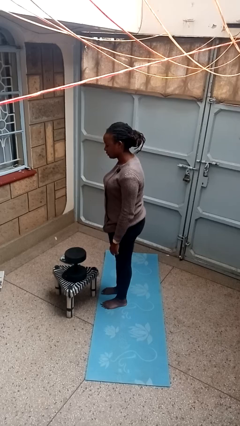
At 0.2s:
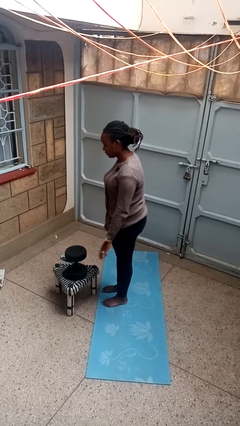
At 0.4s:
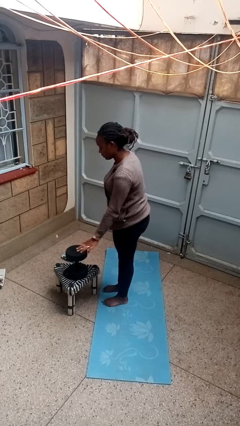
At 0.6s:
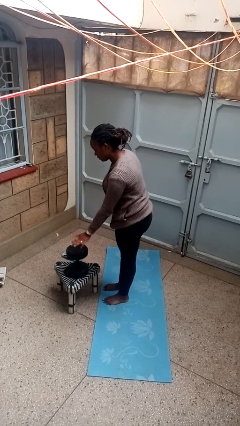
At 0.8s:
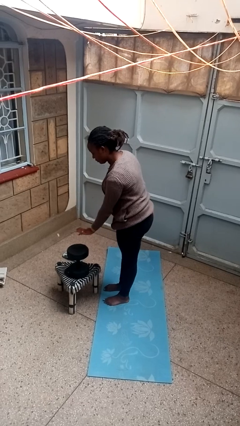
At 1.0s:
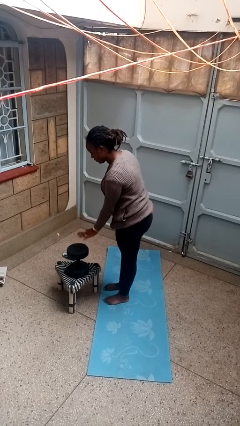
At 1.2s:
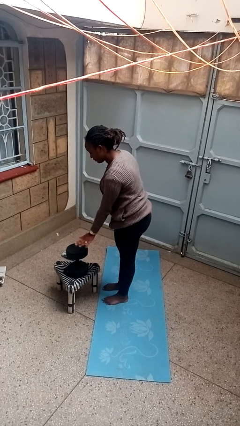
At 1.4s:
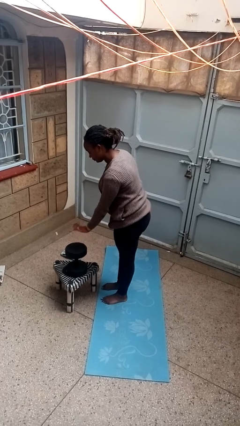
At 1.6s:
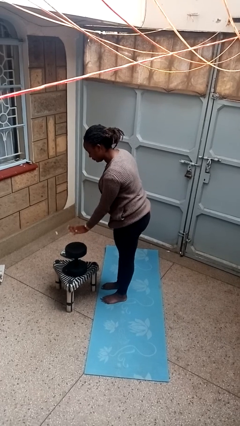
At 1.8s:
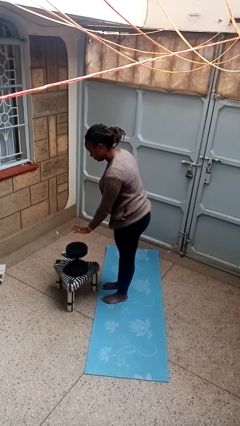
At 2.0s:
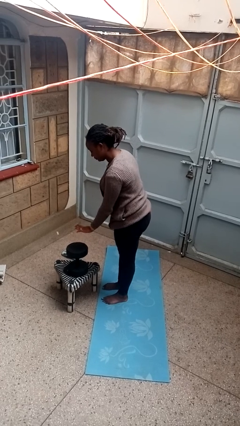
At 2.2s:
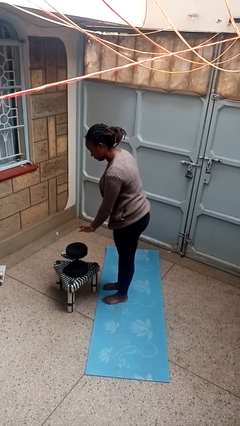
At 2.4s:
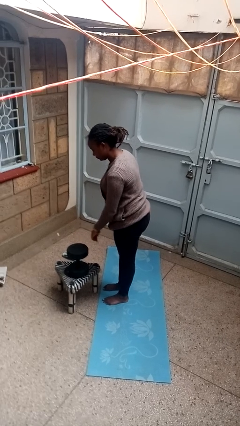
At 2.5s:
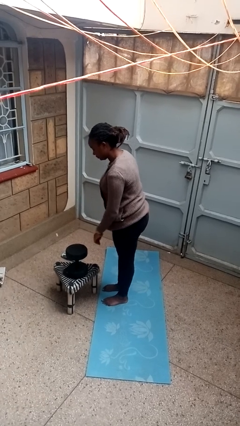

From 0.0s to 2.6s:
person waves hand over object

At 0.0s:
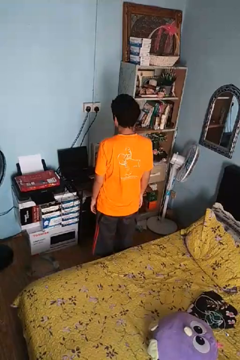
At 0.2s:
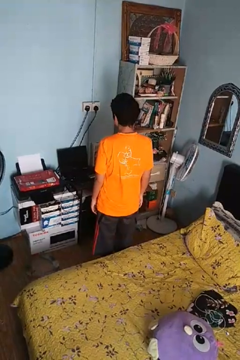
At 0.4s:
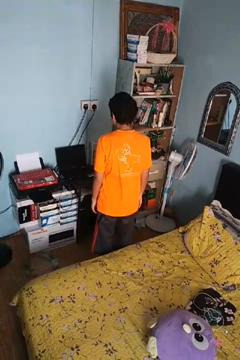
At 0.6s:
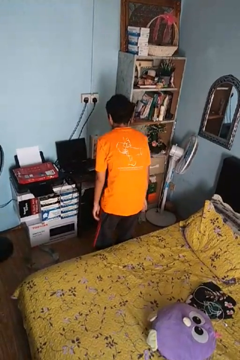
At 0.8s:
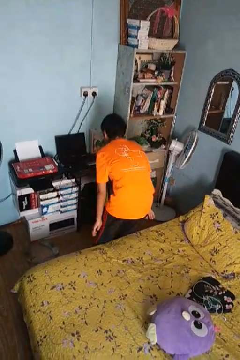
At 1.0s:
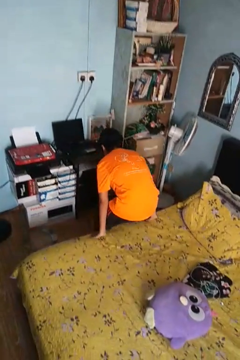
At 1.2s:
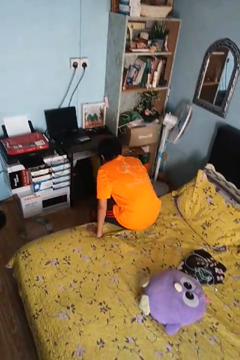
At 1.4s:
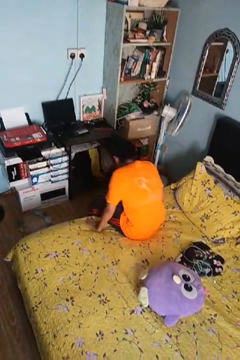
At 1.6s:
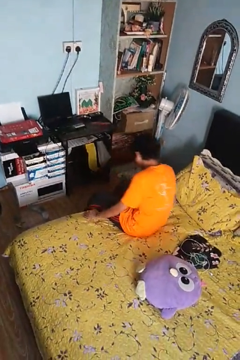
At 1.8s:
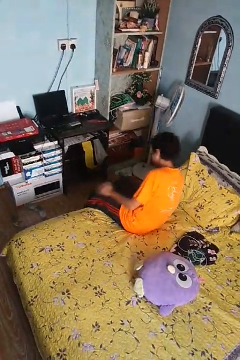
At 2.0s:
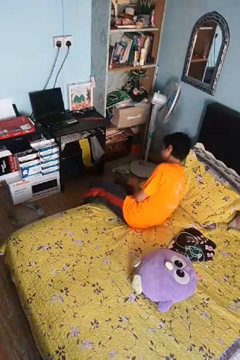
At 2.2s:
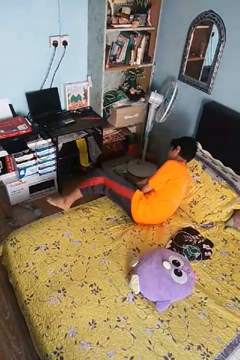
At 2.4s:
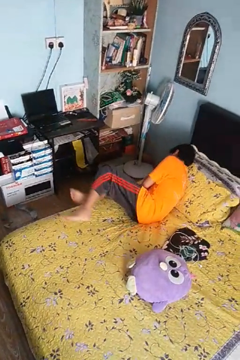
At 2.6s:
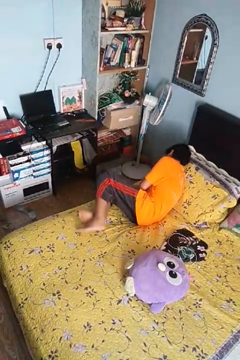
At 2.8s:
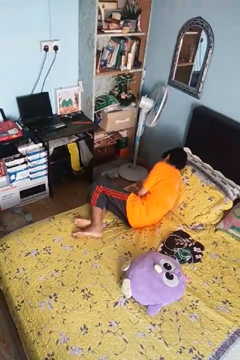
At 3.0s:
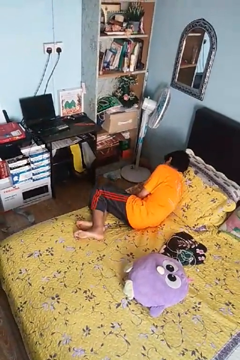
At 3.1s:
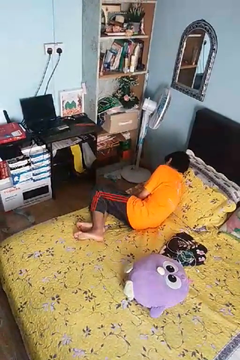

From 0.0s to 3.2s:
person lies down on bed

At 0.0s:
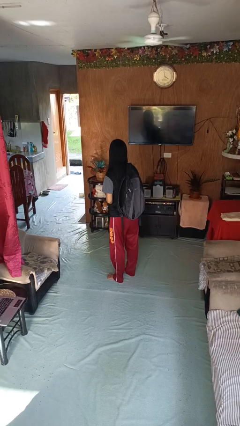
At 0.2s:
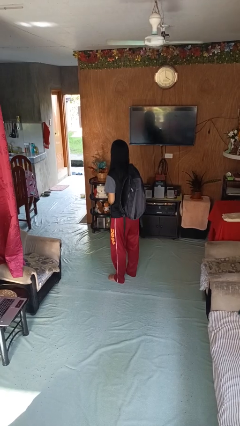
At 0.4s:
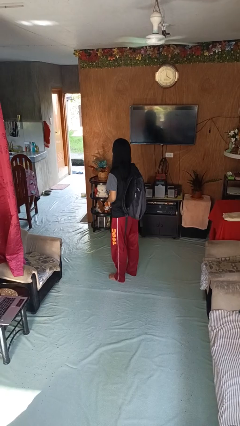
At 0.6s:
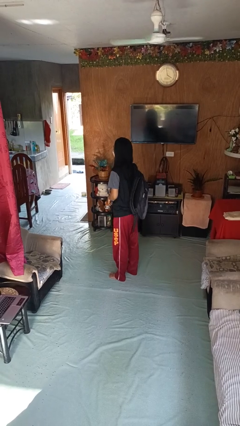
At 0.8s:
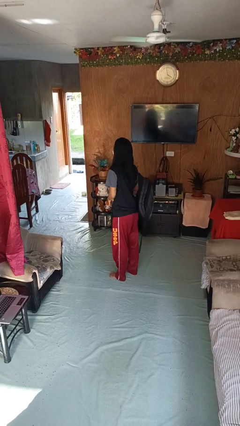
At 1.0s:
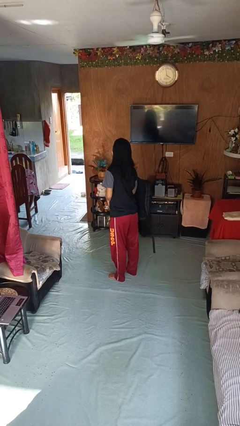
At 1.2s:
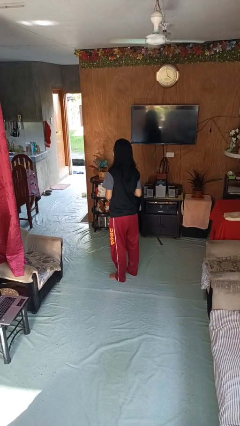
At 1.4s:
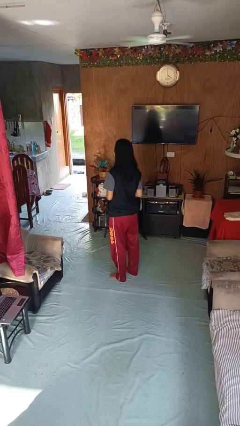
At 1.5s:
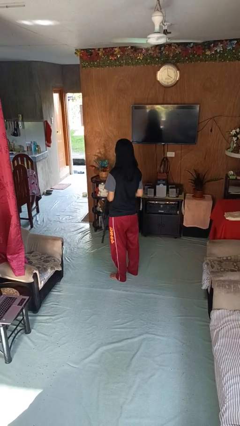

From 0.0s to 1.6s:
person takes off backpack

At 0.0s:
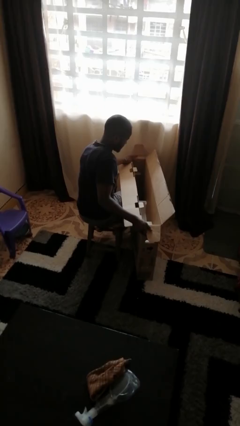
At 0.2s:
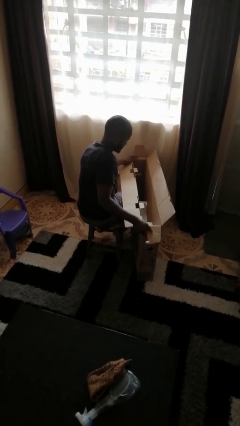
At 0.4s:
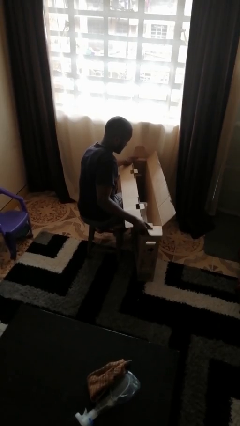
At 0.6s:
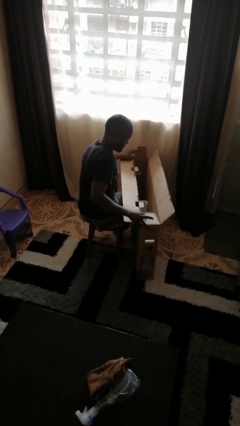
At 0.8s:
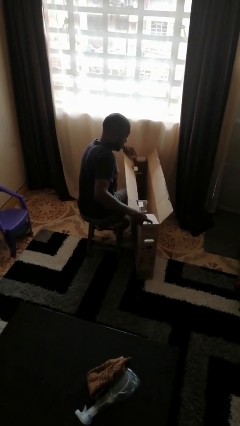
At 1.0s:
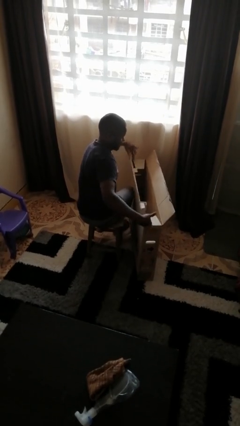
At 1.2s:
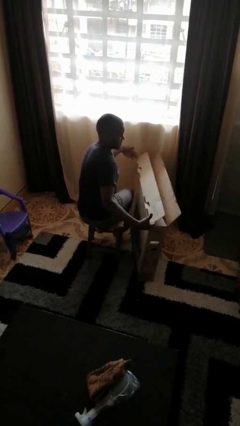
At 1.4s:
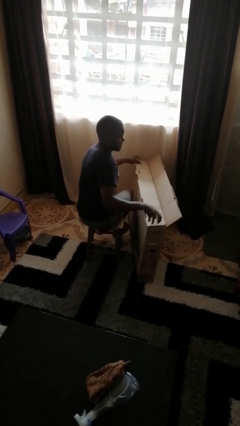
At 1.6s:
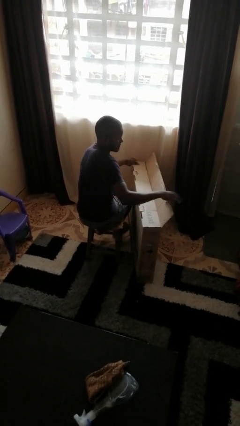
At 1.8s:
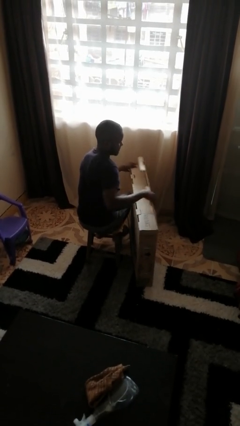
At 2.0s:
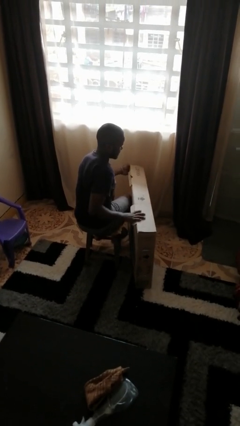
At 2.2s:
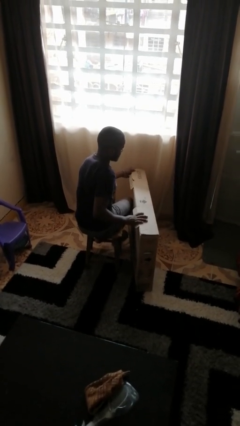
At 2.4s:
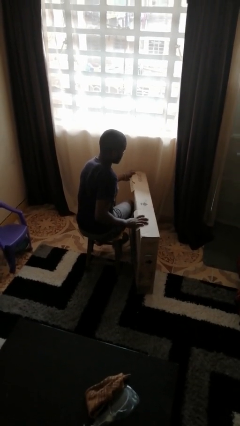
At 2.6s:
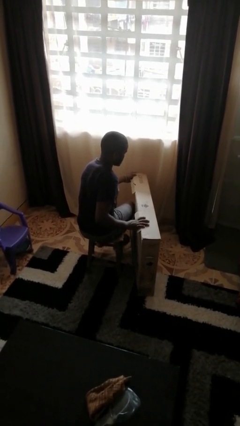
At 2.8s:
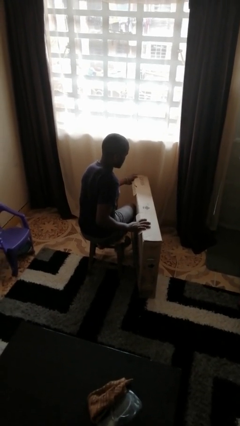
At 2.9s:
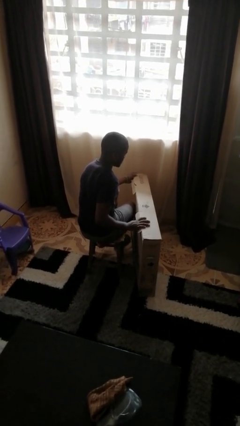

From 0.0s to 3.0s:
person closes box

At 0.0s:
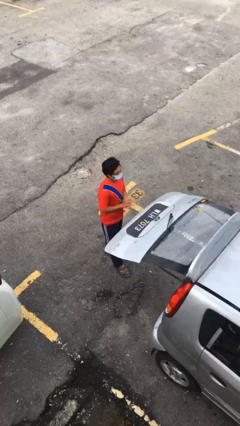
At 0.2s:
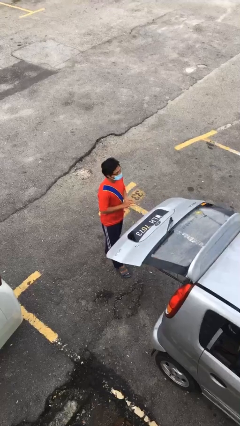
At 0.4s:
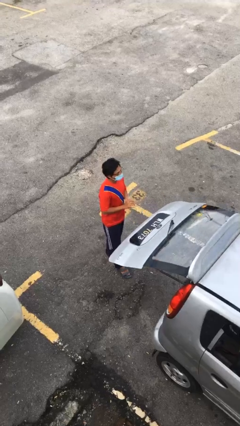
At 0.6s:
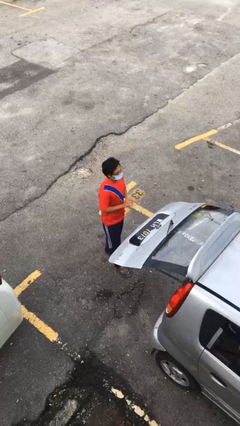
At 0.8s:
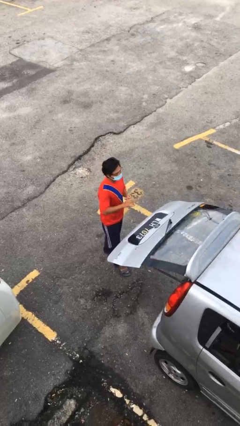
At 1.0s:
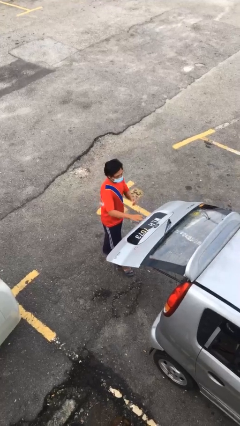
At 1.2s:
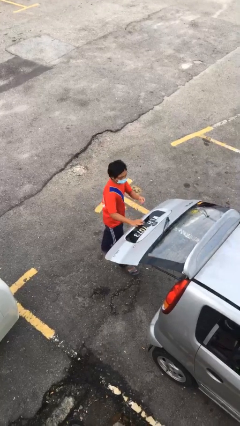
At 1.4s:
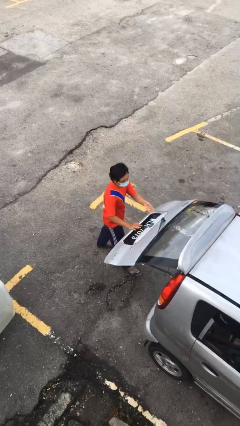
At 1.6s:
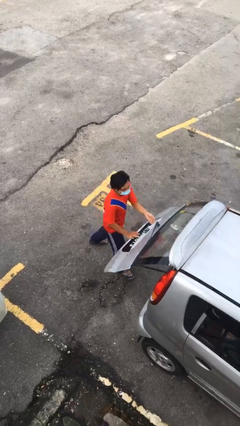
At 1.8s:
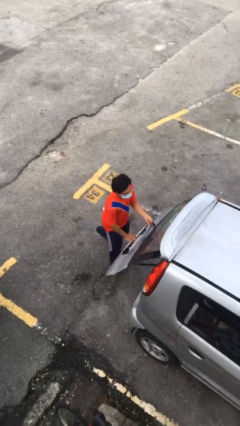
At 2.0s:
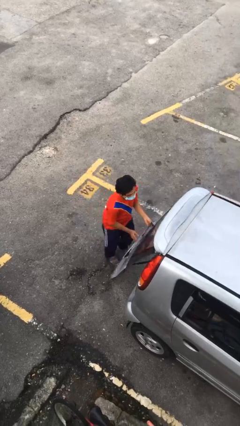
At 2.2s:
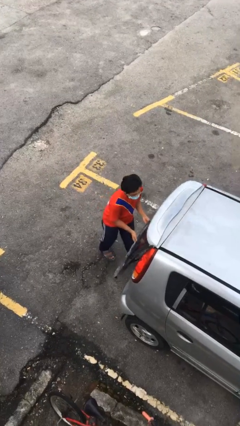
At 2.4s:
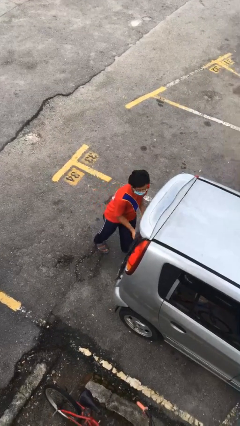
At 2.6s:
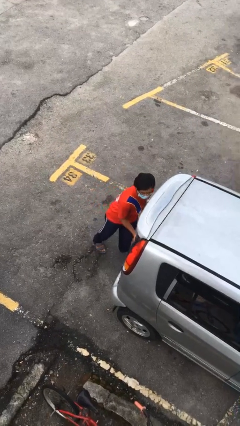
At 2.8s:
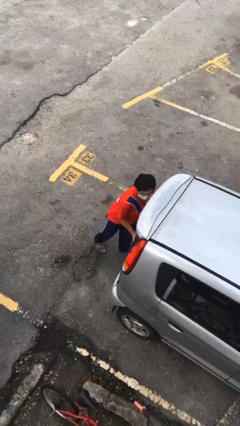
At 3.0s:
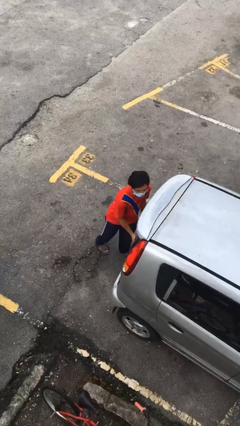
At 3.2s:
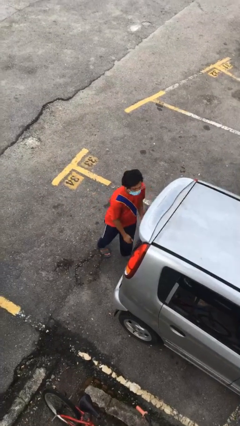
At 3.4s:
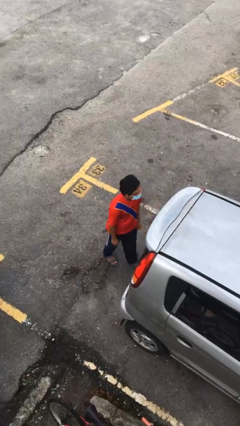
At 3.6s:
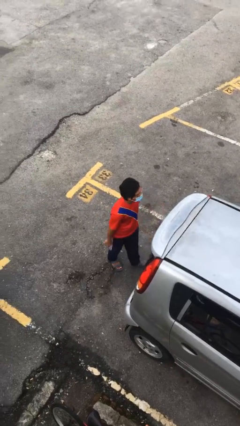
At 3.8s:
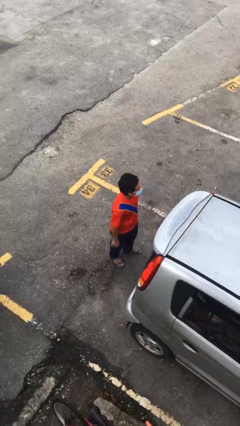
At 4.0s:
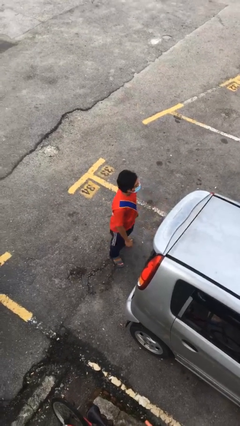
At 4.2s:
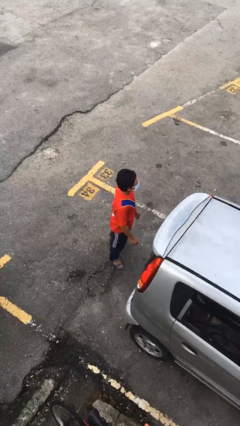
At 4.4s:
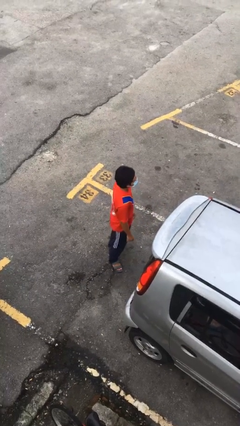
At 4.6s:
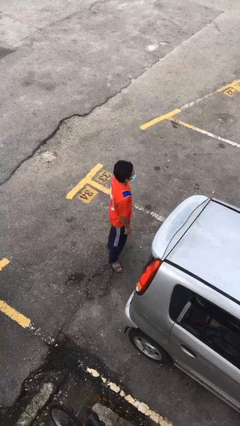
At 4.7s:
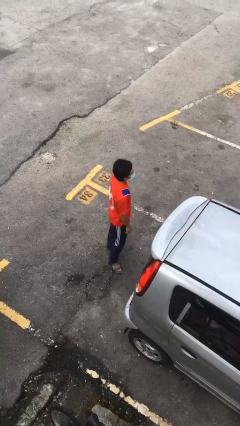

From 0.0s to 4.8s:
person closes car trunk

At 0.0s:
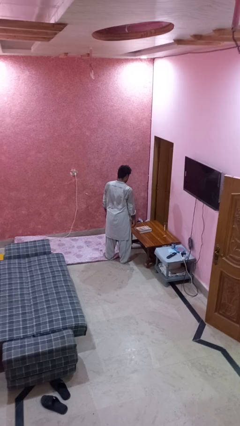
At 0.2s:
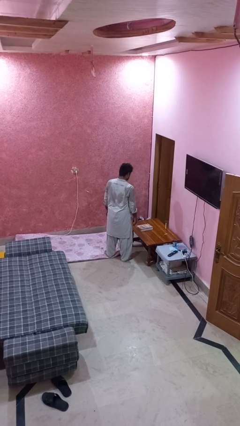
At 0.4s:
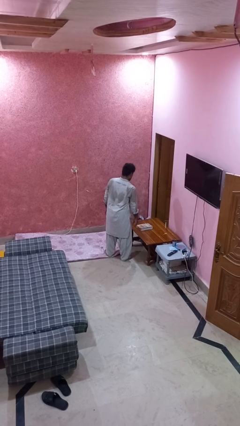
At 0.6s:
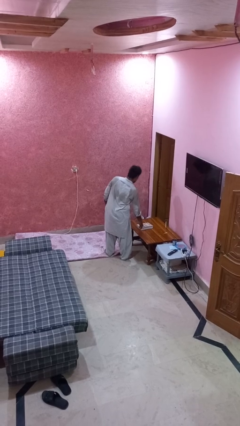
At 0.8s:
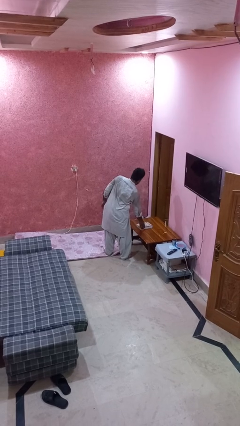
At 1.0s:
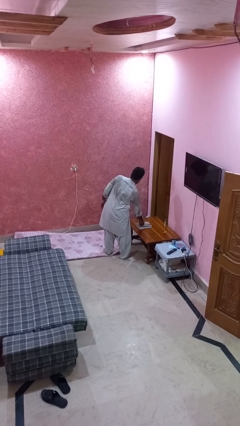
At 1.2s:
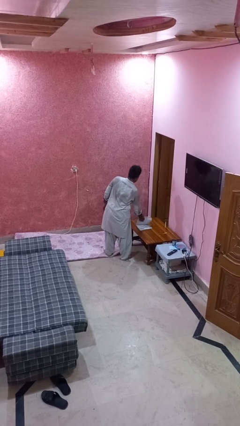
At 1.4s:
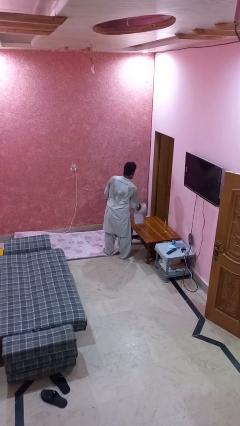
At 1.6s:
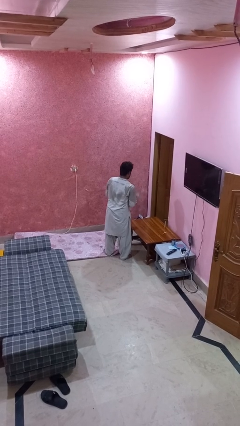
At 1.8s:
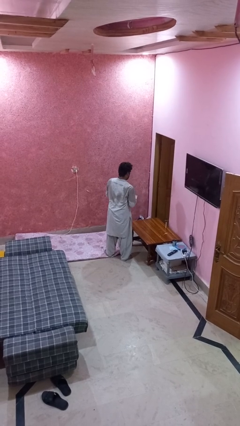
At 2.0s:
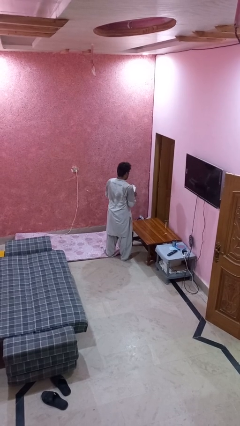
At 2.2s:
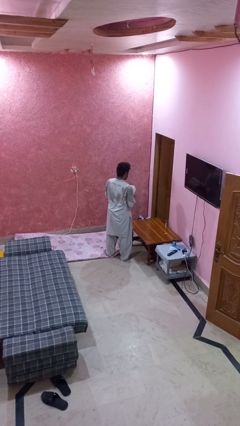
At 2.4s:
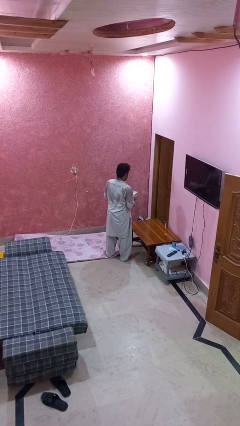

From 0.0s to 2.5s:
person picks up object from table

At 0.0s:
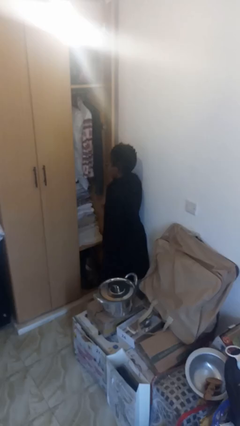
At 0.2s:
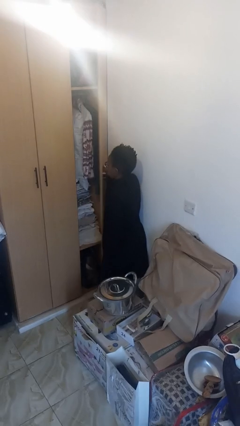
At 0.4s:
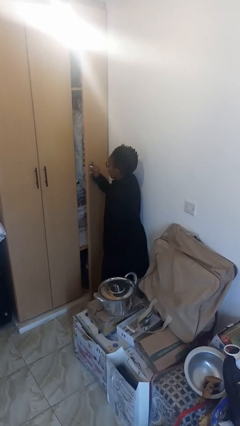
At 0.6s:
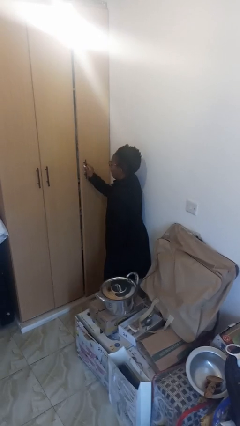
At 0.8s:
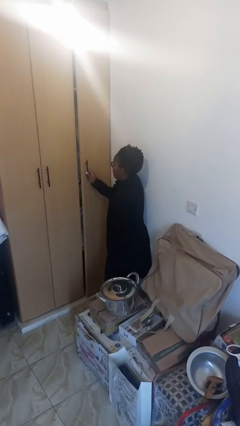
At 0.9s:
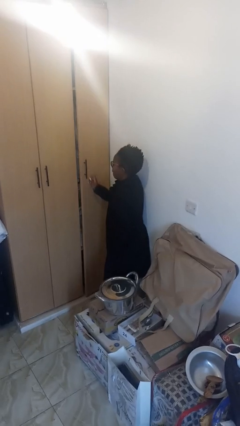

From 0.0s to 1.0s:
person closes closet door
